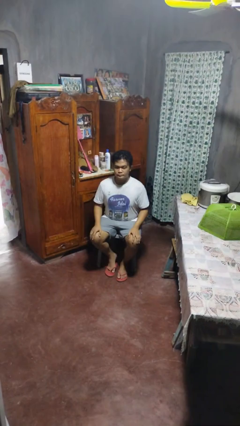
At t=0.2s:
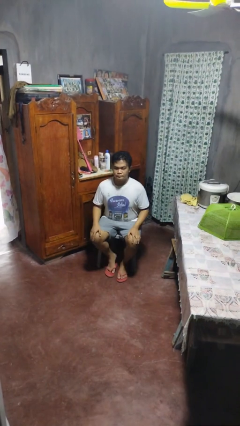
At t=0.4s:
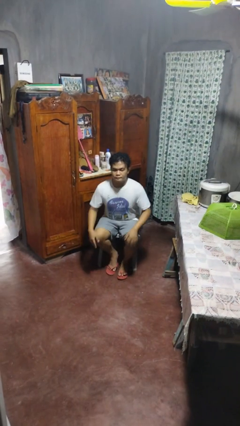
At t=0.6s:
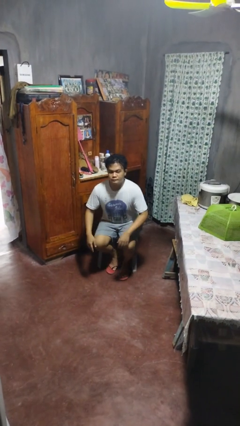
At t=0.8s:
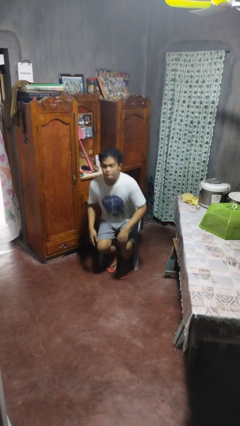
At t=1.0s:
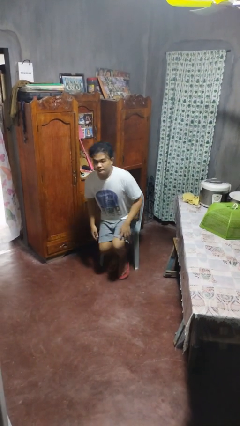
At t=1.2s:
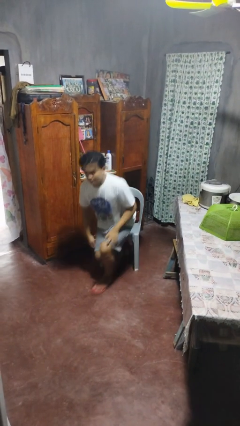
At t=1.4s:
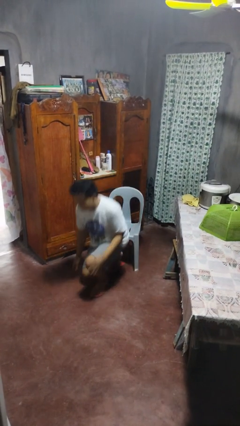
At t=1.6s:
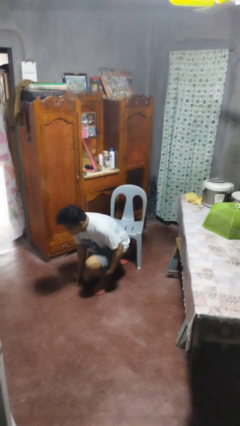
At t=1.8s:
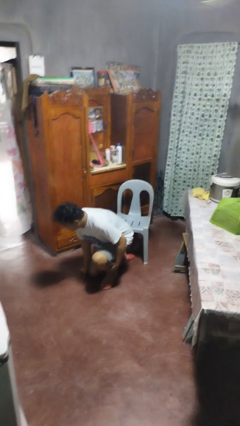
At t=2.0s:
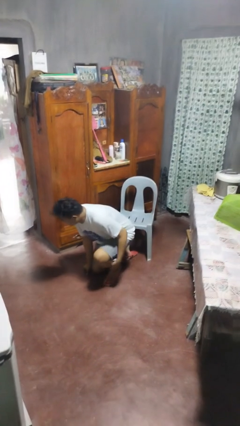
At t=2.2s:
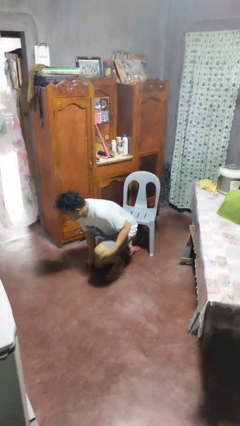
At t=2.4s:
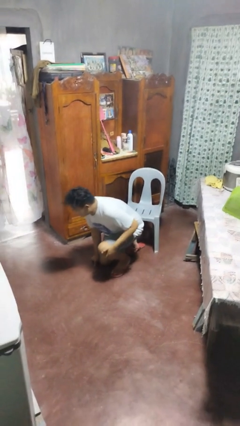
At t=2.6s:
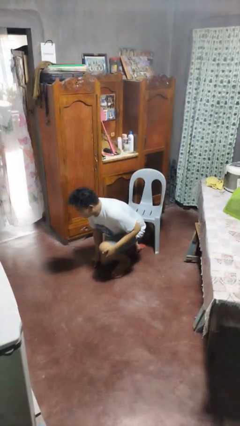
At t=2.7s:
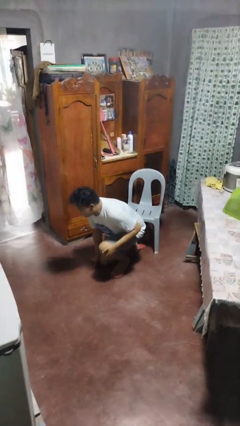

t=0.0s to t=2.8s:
person falls from chair

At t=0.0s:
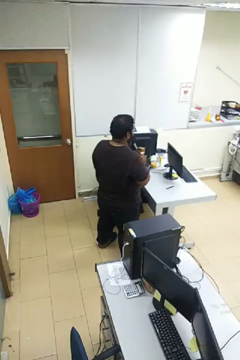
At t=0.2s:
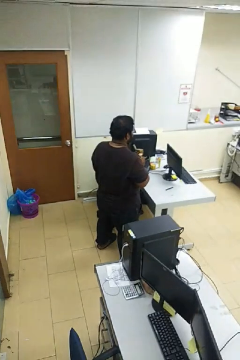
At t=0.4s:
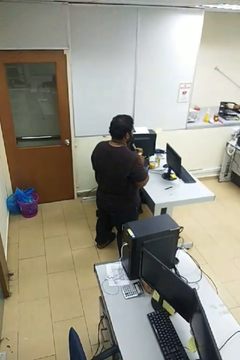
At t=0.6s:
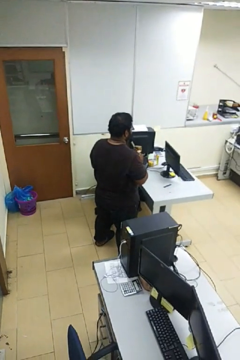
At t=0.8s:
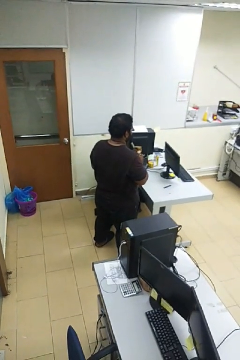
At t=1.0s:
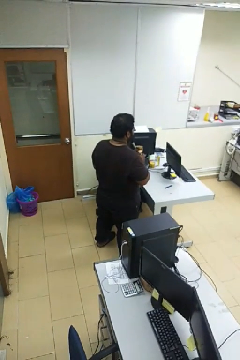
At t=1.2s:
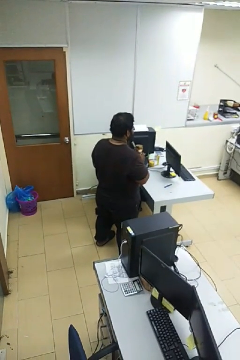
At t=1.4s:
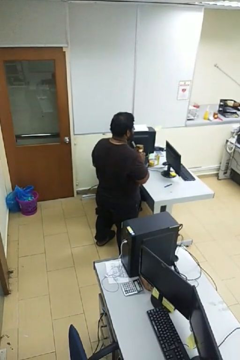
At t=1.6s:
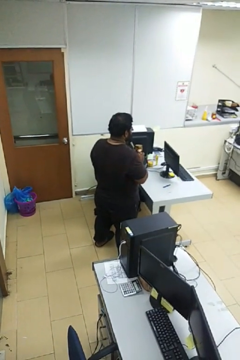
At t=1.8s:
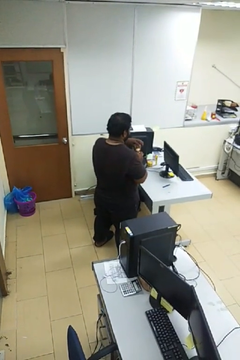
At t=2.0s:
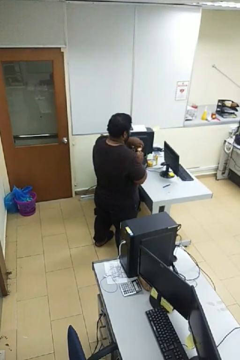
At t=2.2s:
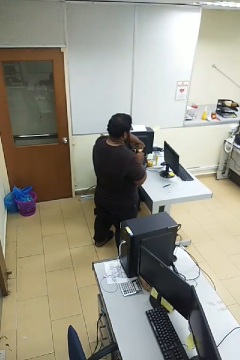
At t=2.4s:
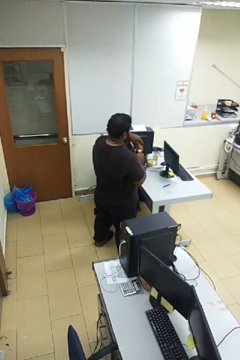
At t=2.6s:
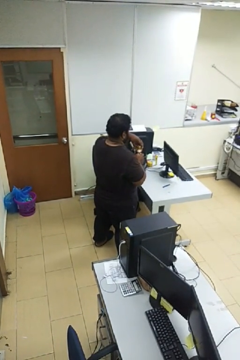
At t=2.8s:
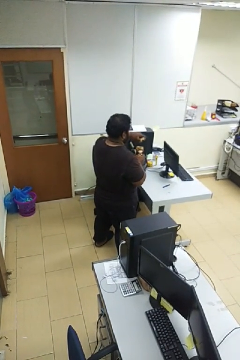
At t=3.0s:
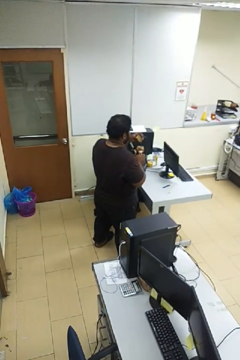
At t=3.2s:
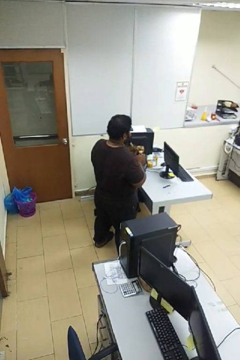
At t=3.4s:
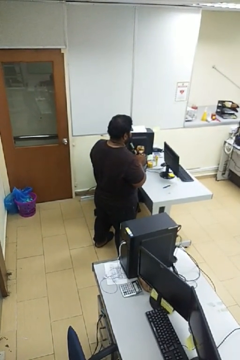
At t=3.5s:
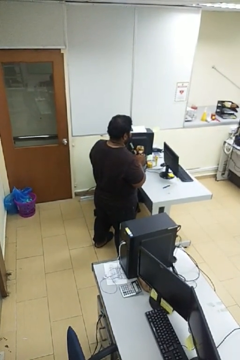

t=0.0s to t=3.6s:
person opens jar

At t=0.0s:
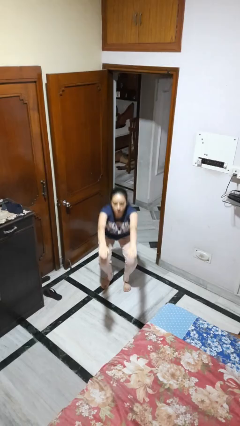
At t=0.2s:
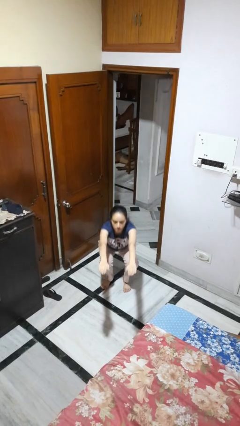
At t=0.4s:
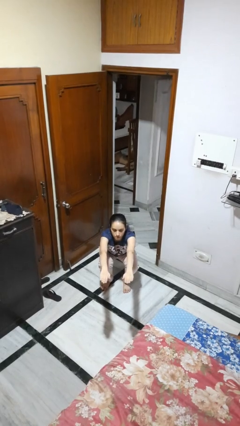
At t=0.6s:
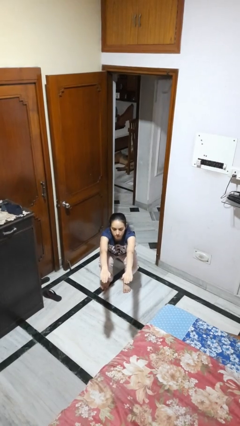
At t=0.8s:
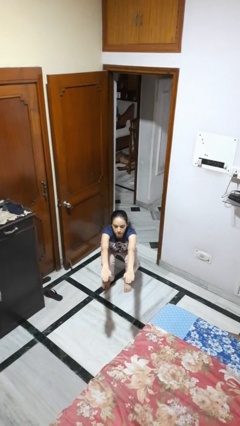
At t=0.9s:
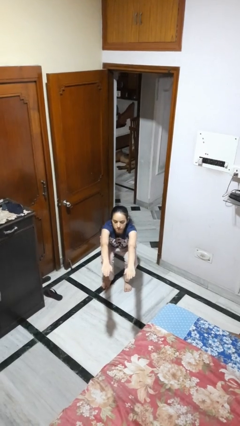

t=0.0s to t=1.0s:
person squats

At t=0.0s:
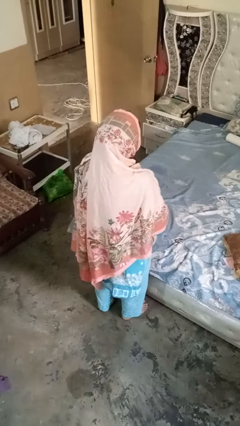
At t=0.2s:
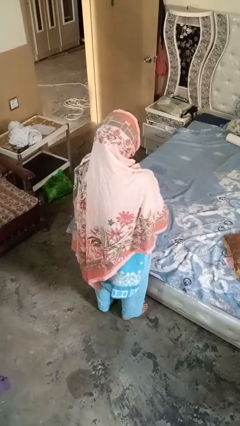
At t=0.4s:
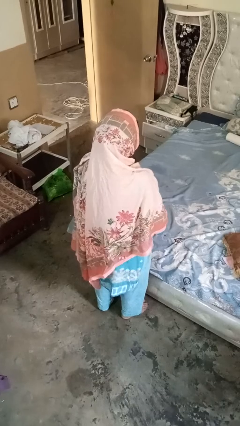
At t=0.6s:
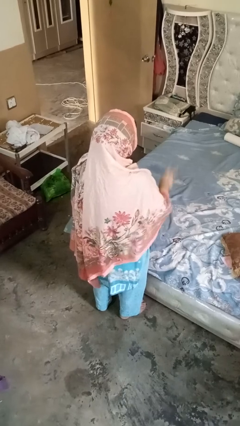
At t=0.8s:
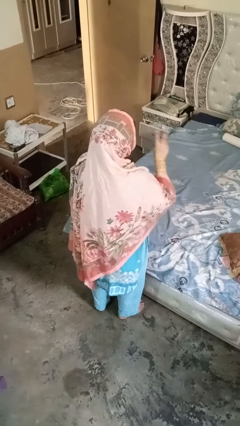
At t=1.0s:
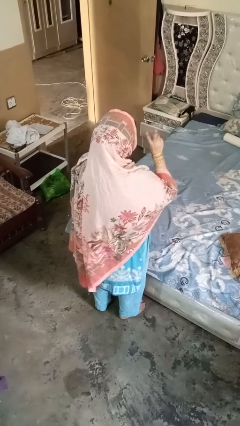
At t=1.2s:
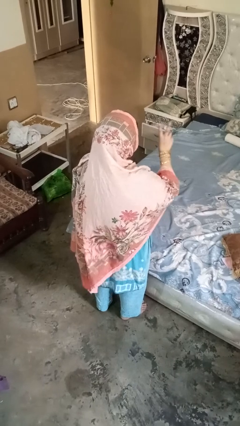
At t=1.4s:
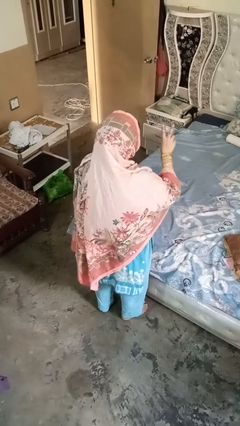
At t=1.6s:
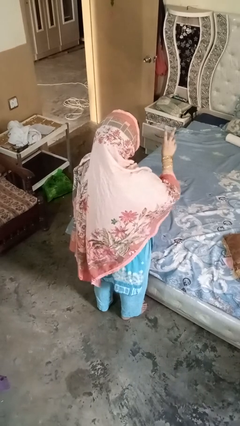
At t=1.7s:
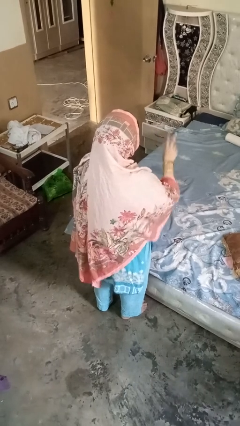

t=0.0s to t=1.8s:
person gestures be quiet

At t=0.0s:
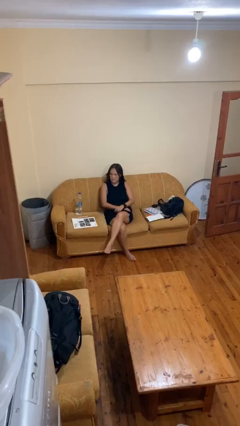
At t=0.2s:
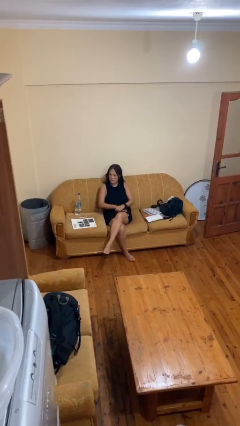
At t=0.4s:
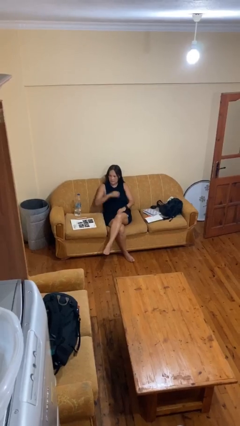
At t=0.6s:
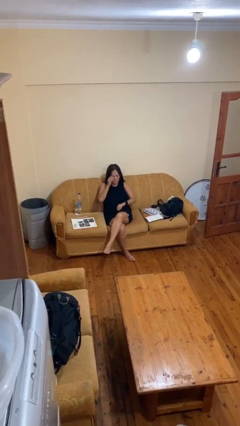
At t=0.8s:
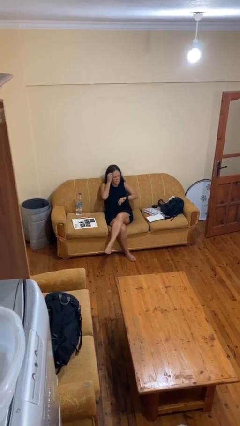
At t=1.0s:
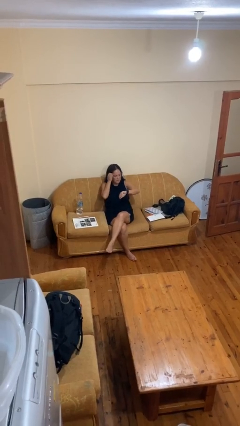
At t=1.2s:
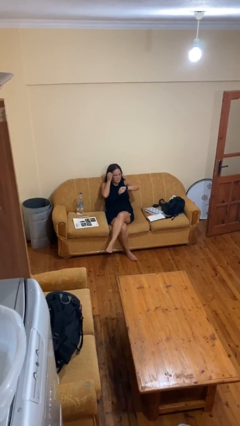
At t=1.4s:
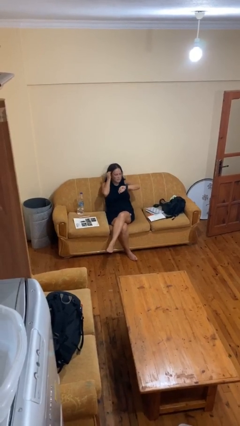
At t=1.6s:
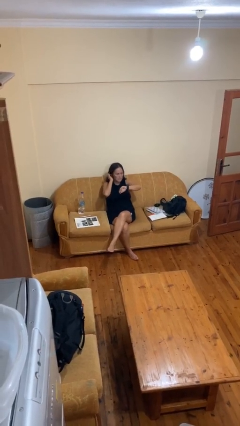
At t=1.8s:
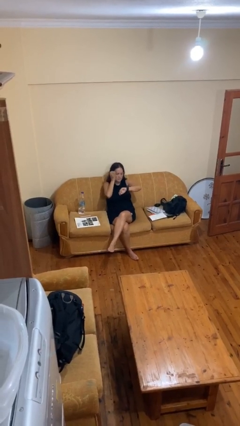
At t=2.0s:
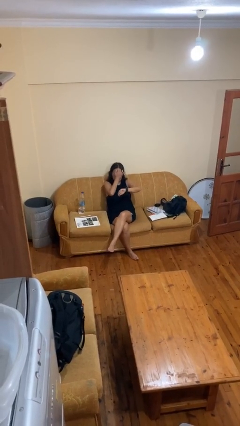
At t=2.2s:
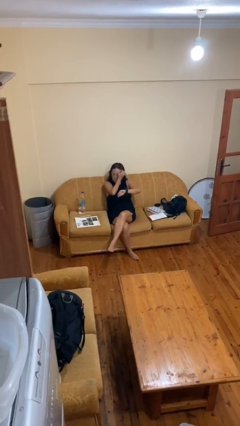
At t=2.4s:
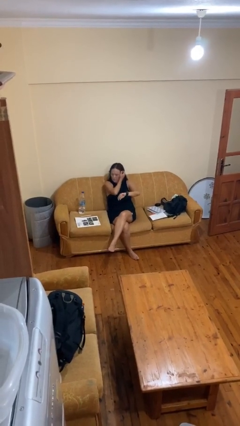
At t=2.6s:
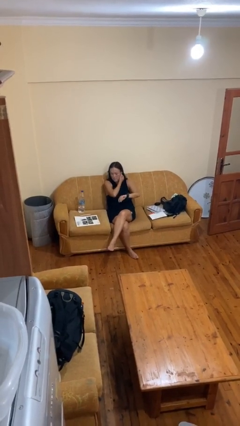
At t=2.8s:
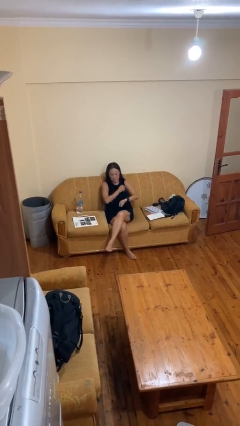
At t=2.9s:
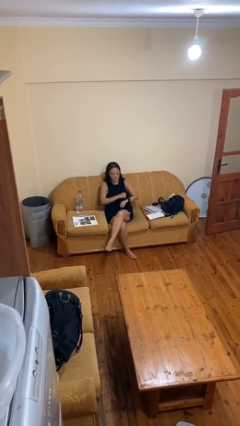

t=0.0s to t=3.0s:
person looks at wristwatch

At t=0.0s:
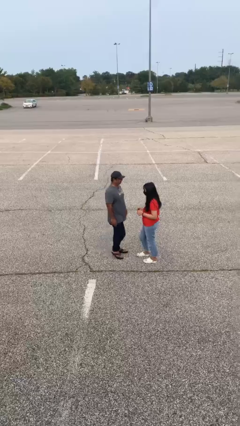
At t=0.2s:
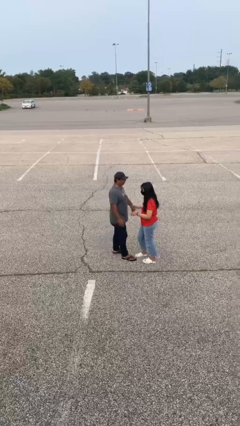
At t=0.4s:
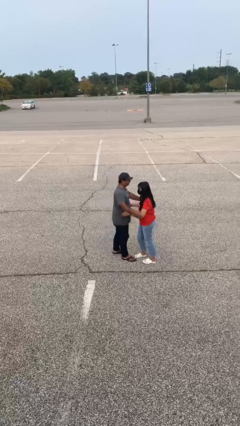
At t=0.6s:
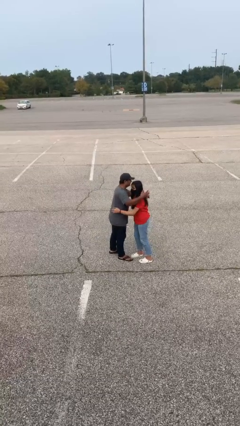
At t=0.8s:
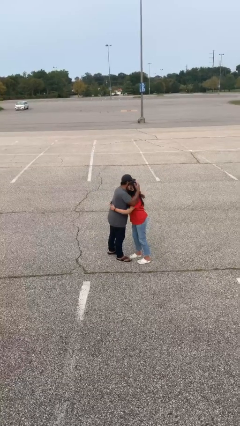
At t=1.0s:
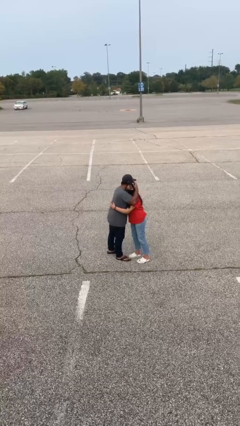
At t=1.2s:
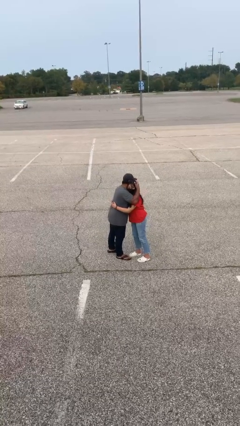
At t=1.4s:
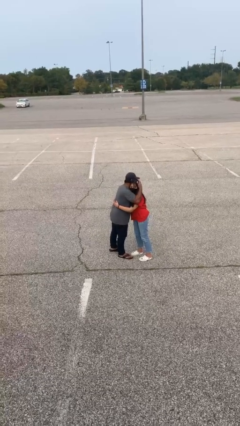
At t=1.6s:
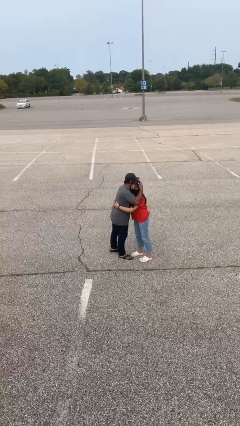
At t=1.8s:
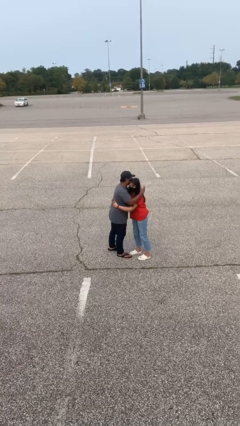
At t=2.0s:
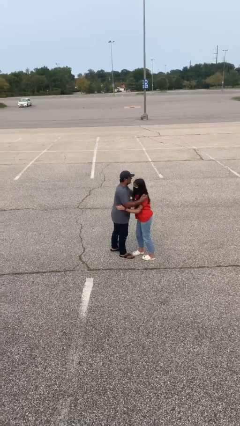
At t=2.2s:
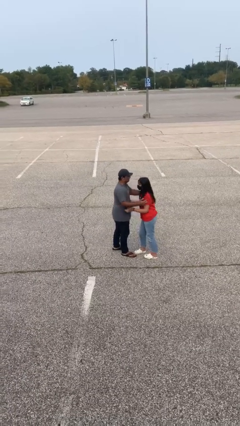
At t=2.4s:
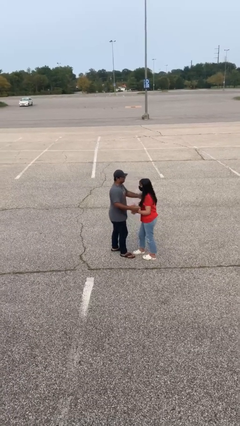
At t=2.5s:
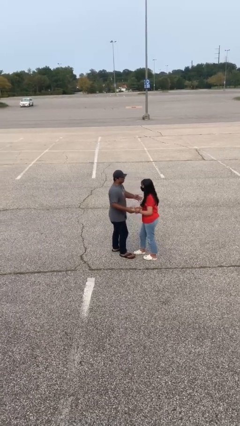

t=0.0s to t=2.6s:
person embraces person

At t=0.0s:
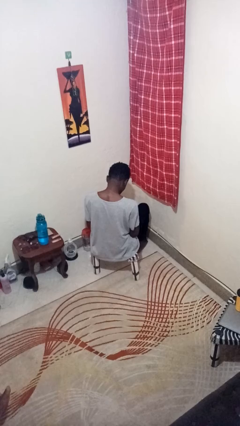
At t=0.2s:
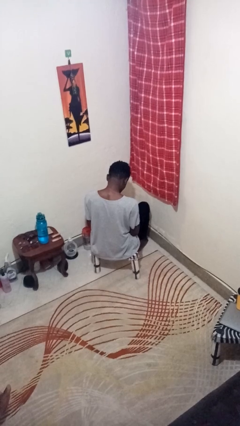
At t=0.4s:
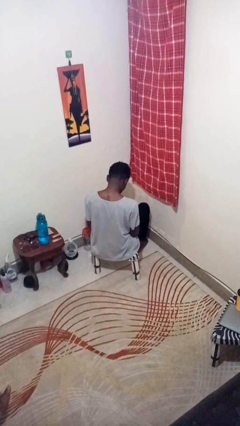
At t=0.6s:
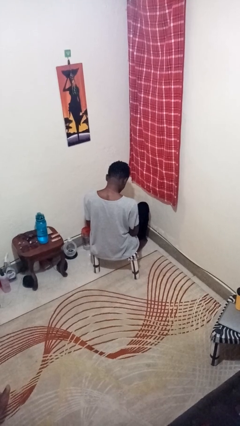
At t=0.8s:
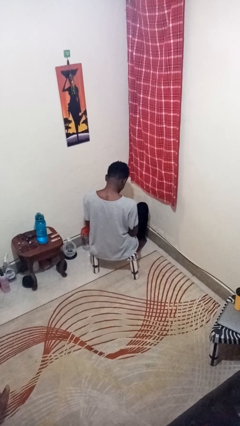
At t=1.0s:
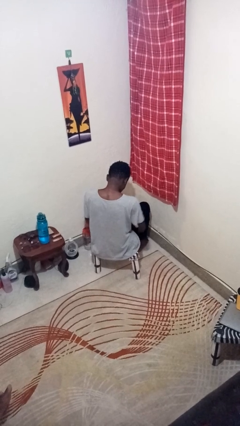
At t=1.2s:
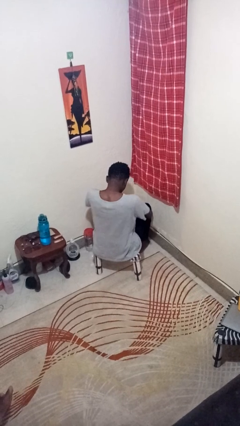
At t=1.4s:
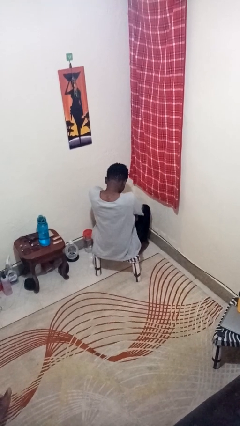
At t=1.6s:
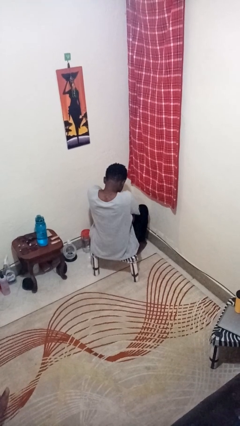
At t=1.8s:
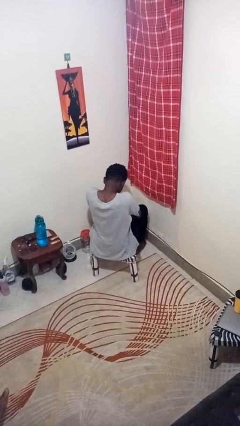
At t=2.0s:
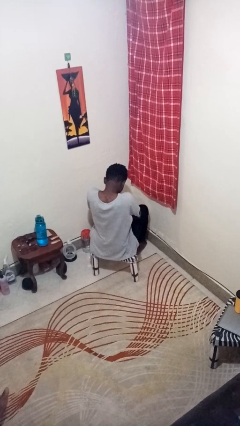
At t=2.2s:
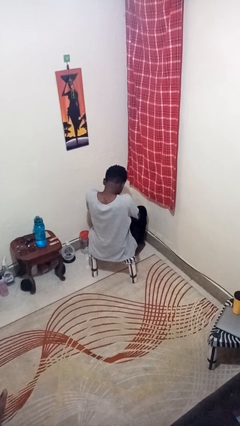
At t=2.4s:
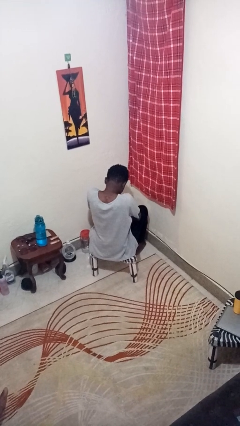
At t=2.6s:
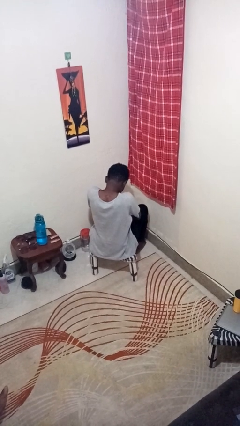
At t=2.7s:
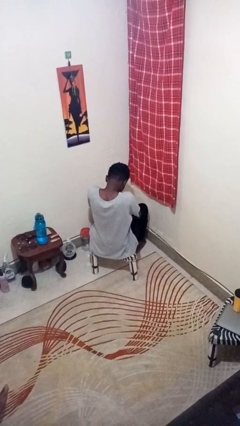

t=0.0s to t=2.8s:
person crosses arms
